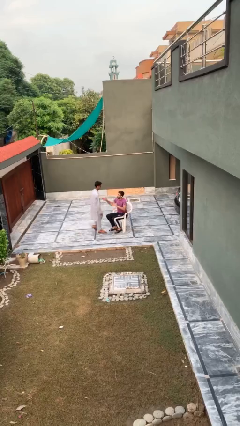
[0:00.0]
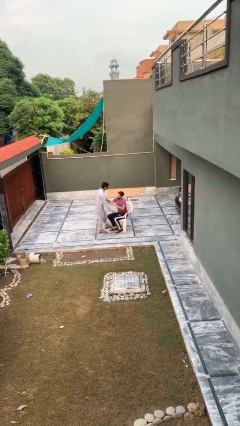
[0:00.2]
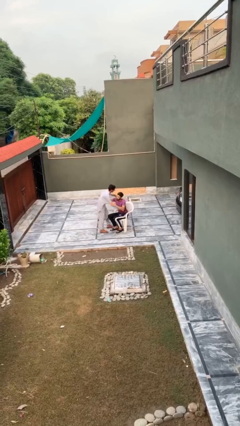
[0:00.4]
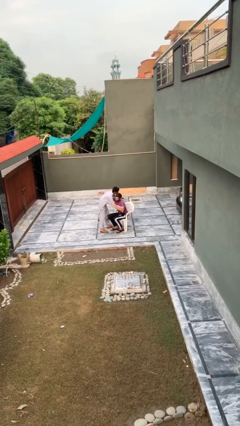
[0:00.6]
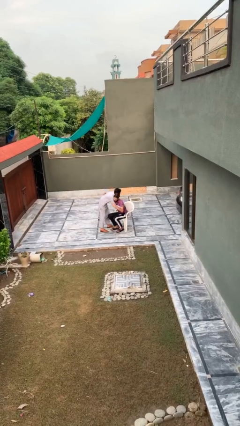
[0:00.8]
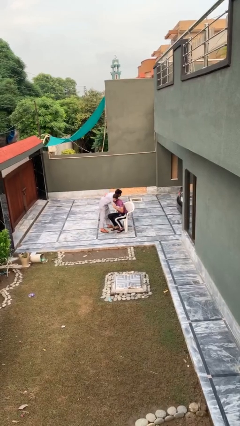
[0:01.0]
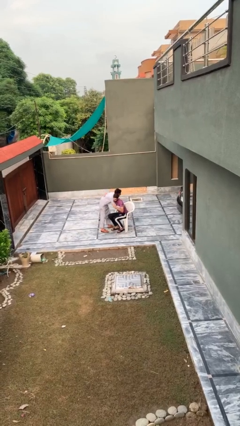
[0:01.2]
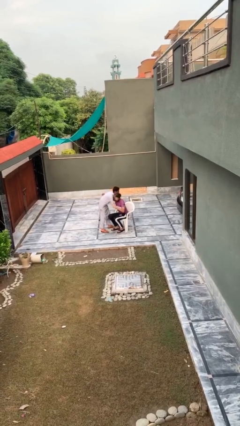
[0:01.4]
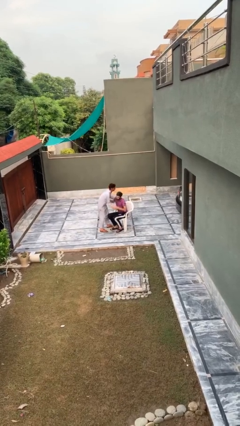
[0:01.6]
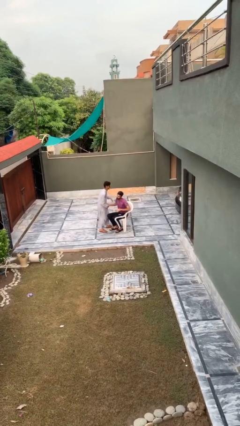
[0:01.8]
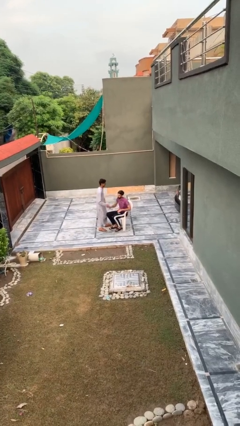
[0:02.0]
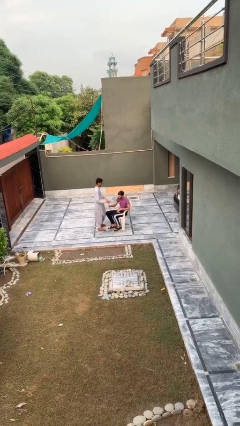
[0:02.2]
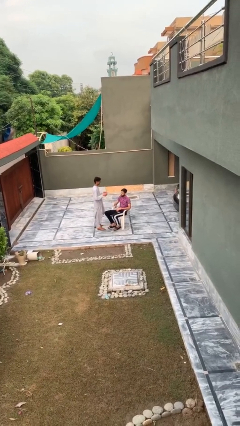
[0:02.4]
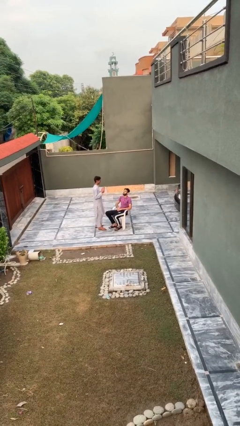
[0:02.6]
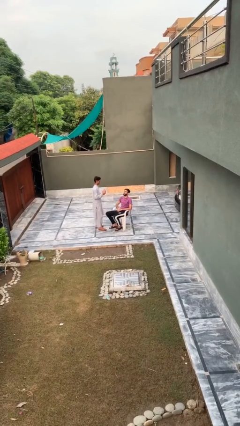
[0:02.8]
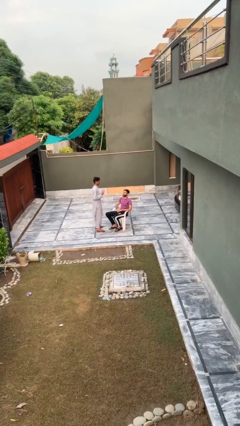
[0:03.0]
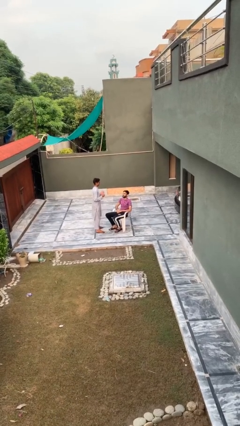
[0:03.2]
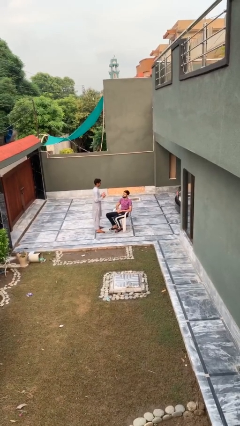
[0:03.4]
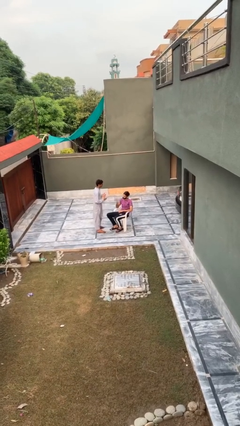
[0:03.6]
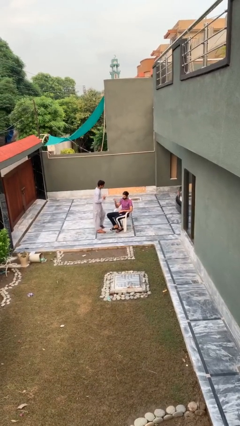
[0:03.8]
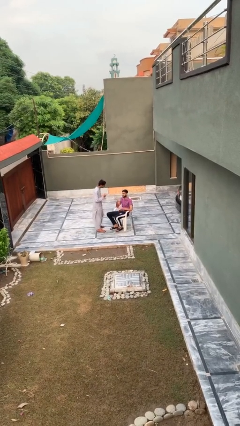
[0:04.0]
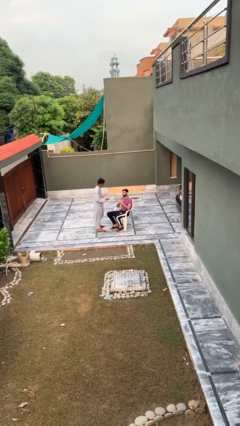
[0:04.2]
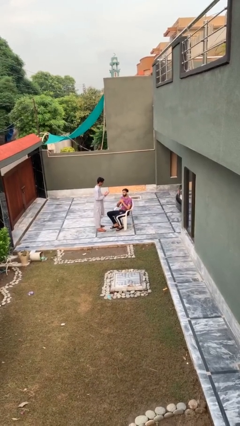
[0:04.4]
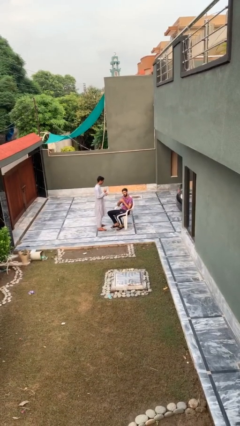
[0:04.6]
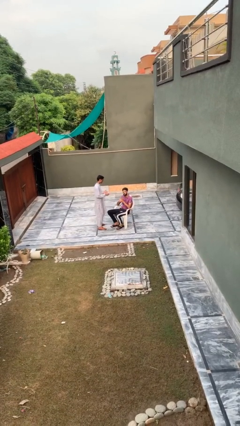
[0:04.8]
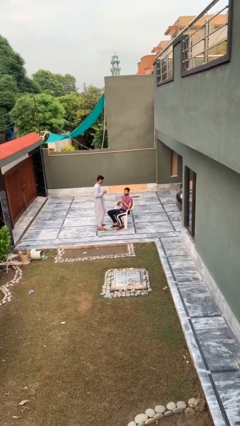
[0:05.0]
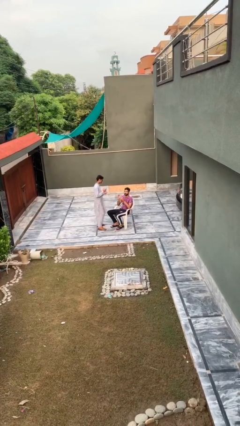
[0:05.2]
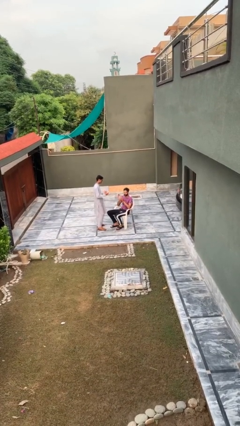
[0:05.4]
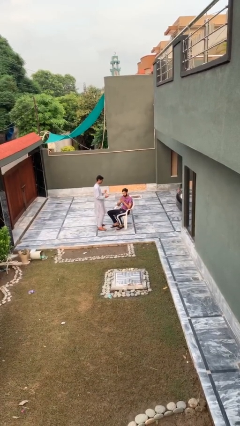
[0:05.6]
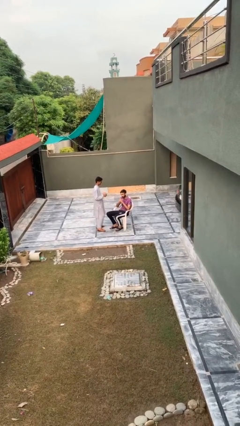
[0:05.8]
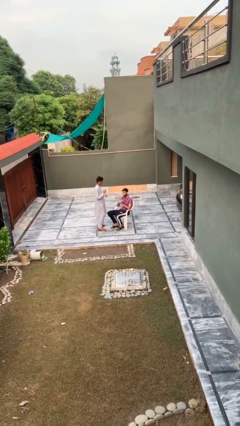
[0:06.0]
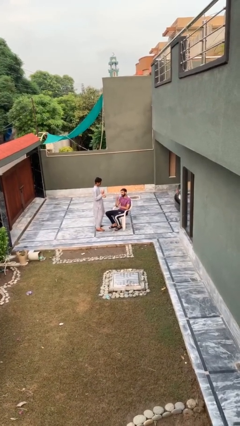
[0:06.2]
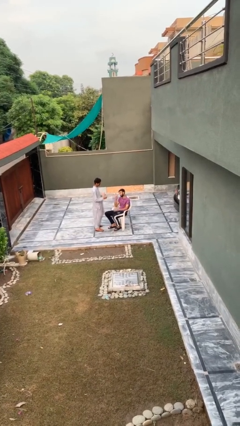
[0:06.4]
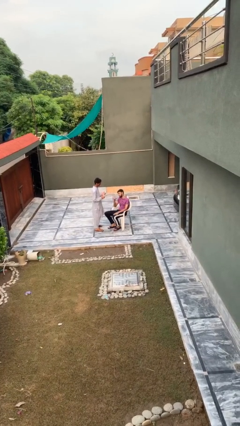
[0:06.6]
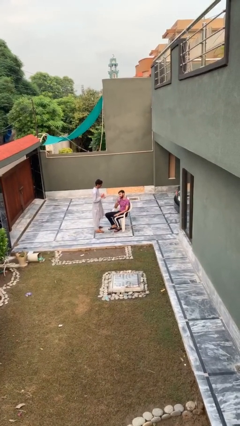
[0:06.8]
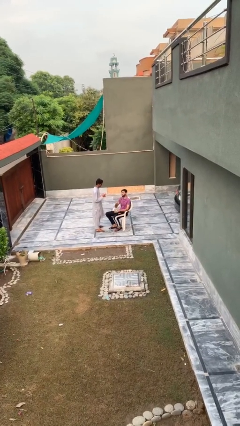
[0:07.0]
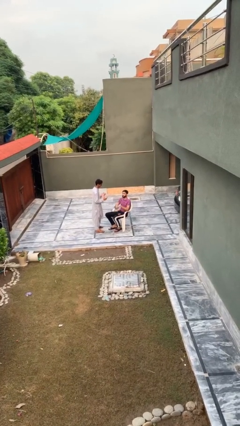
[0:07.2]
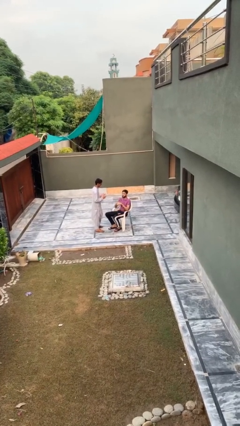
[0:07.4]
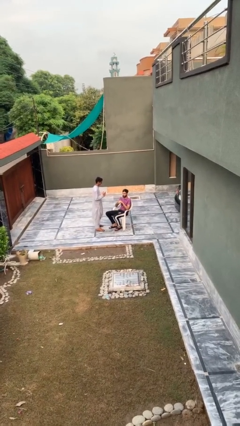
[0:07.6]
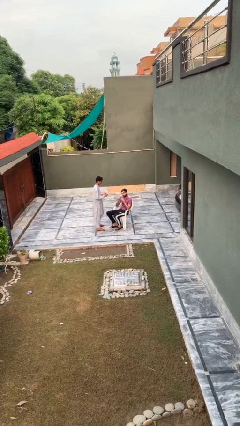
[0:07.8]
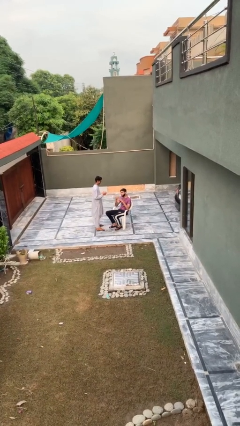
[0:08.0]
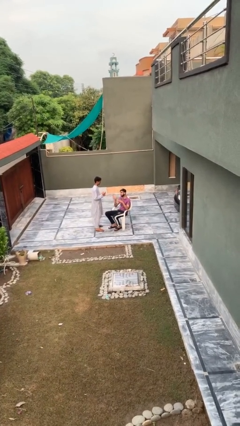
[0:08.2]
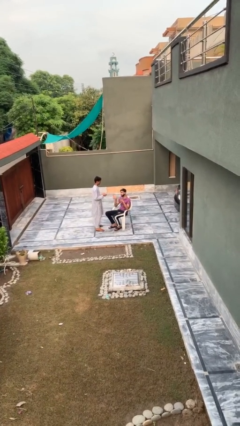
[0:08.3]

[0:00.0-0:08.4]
person embraces person

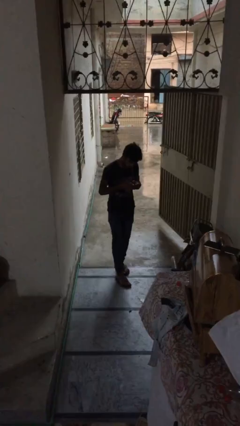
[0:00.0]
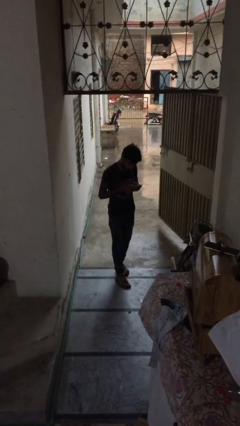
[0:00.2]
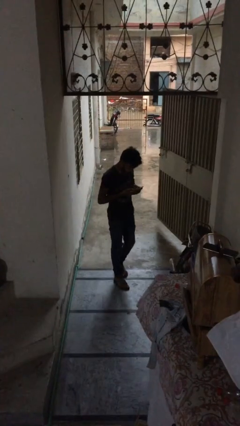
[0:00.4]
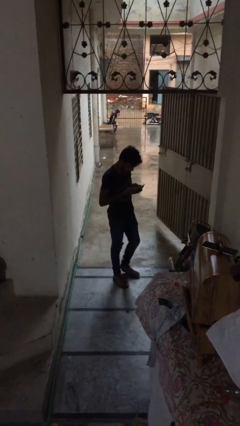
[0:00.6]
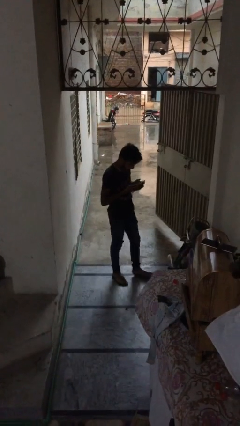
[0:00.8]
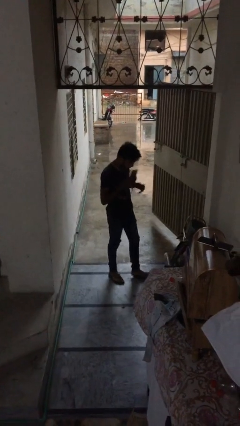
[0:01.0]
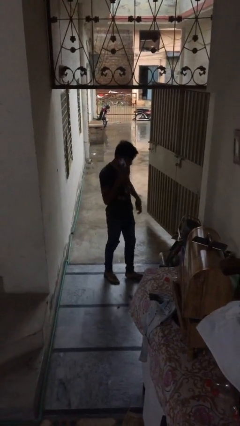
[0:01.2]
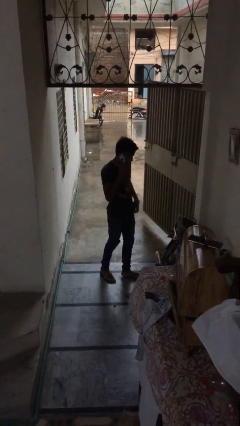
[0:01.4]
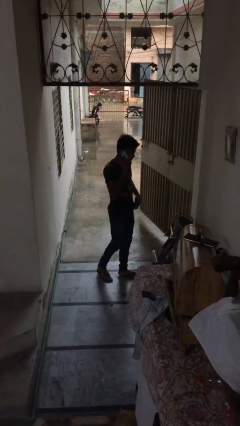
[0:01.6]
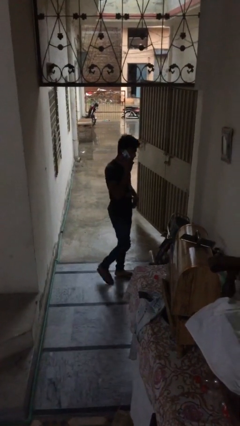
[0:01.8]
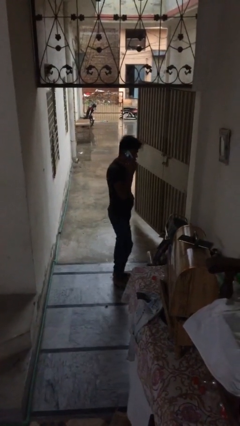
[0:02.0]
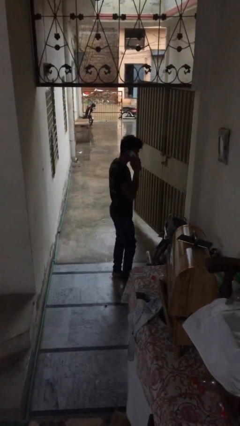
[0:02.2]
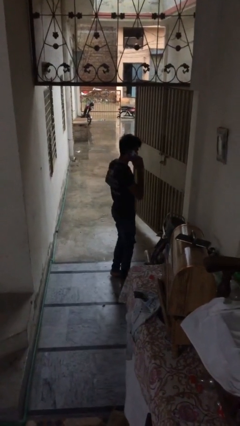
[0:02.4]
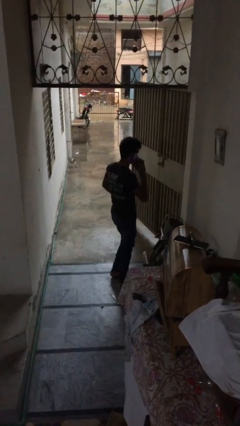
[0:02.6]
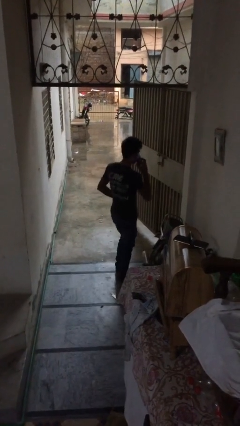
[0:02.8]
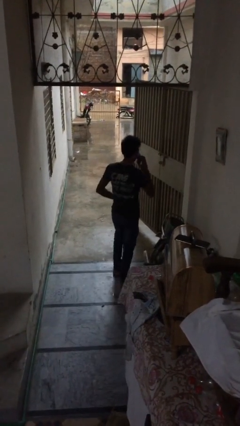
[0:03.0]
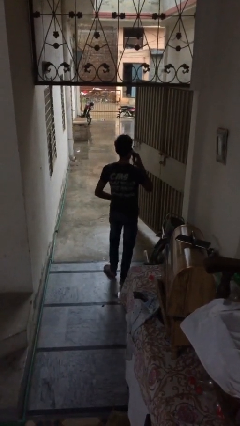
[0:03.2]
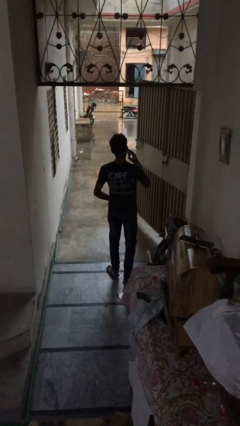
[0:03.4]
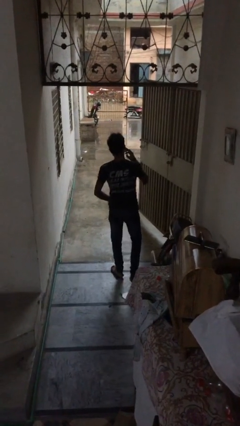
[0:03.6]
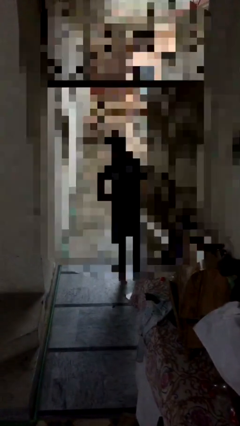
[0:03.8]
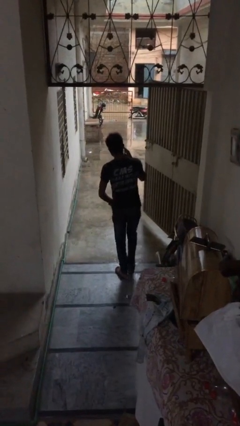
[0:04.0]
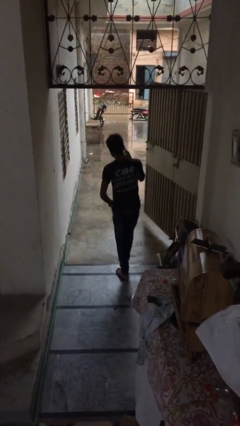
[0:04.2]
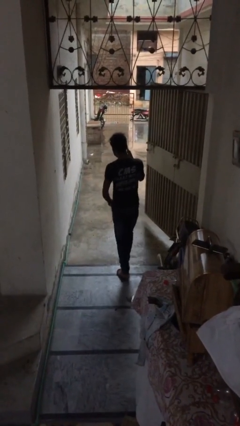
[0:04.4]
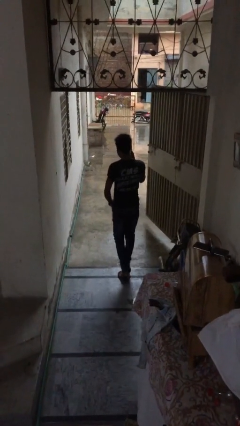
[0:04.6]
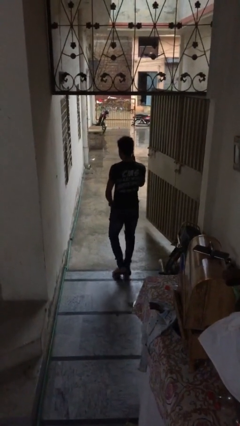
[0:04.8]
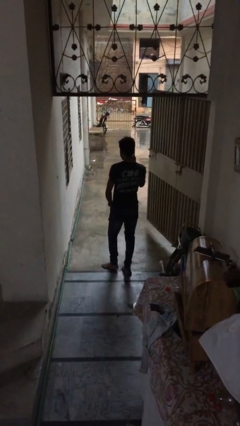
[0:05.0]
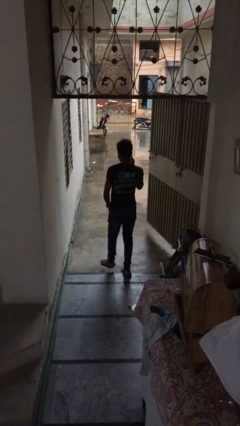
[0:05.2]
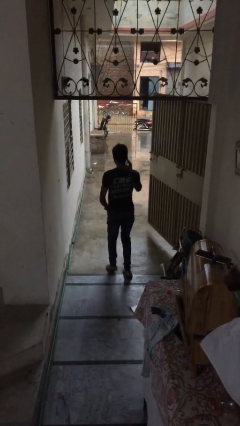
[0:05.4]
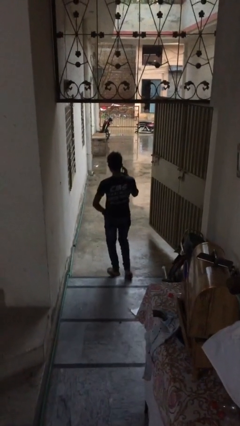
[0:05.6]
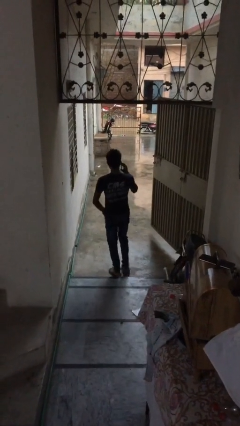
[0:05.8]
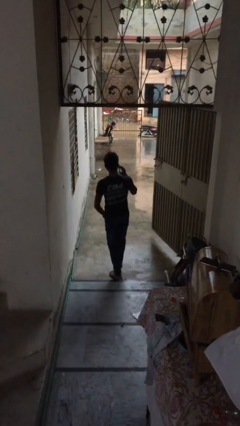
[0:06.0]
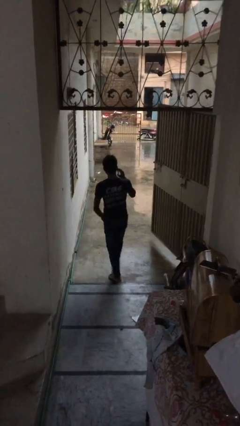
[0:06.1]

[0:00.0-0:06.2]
person talks on phone

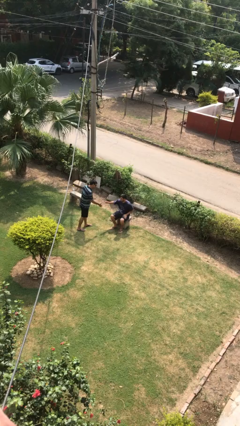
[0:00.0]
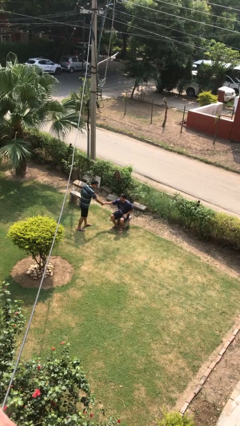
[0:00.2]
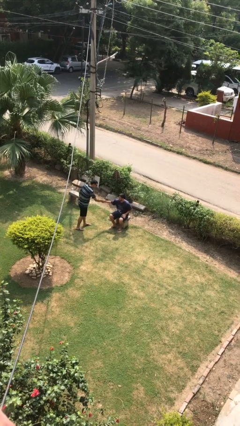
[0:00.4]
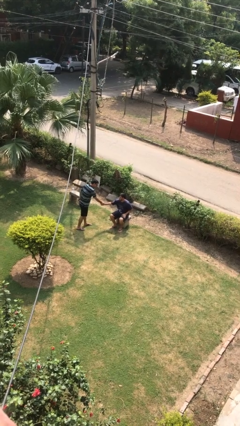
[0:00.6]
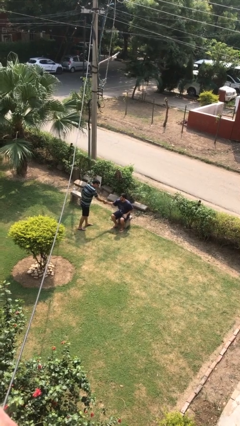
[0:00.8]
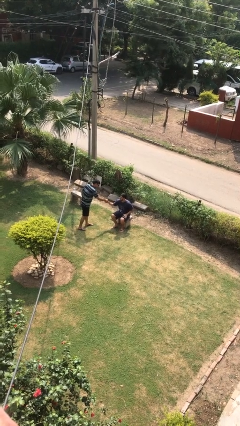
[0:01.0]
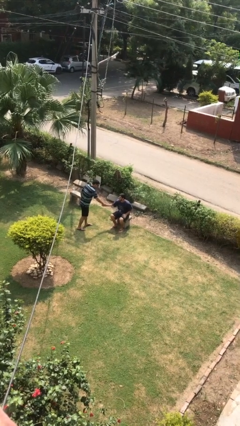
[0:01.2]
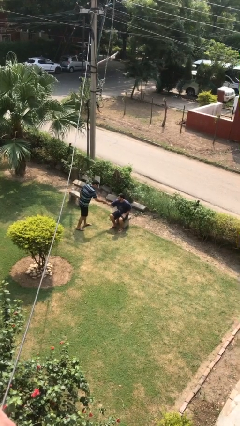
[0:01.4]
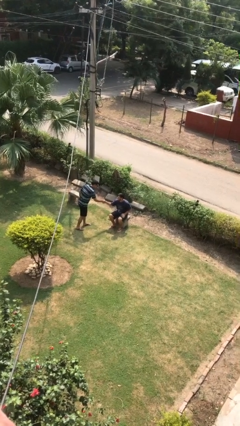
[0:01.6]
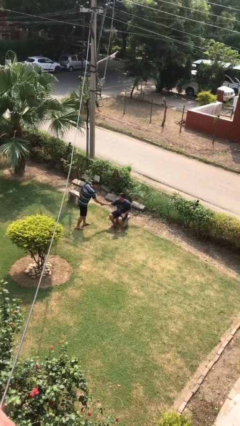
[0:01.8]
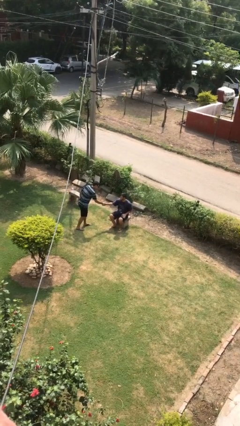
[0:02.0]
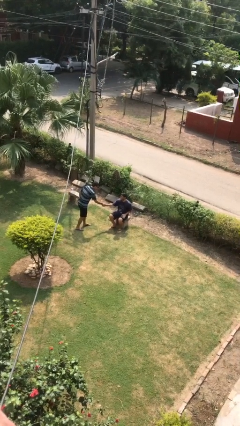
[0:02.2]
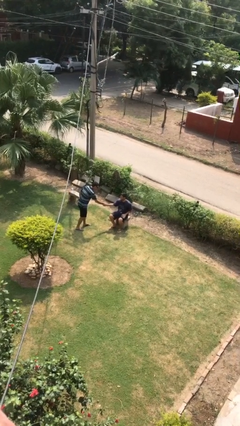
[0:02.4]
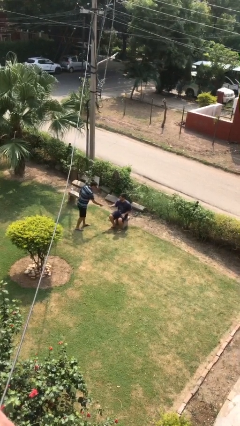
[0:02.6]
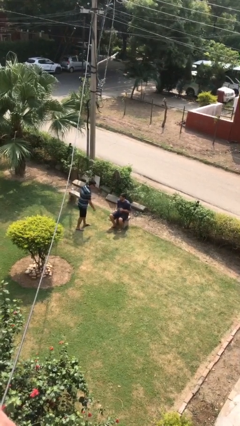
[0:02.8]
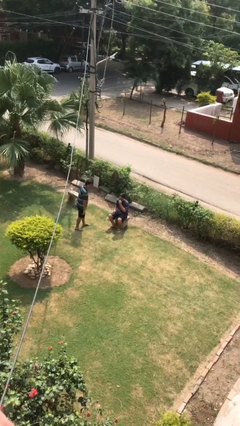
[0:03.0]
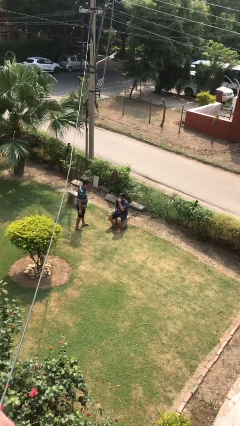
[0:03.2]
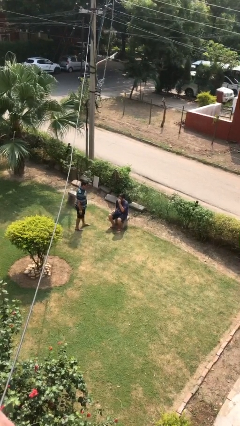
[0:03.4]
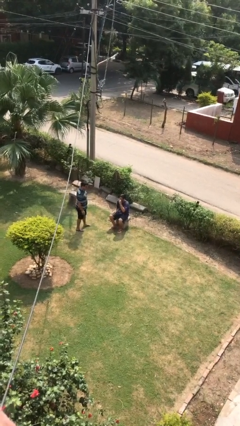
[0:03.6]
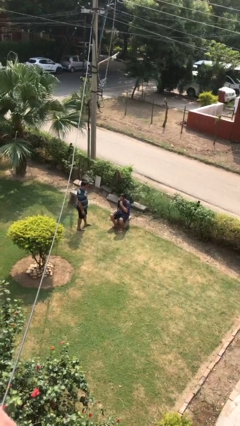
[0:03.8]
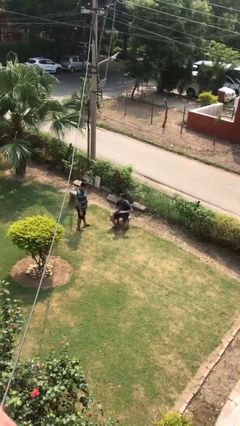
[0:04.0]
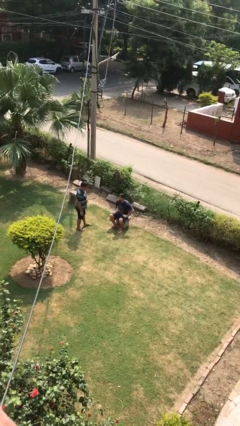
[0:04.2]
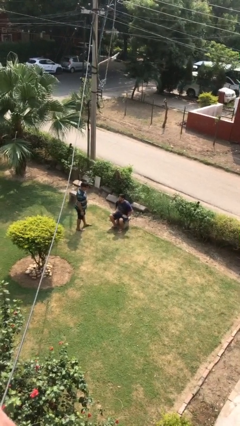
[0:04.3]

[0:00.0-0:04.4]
person shakes hand
